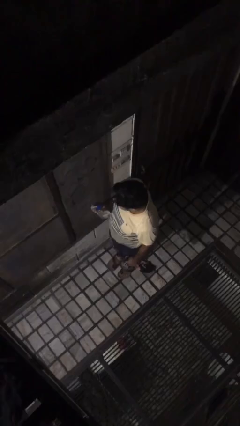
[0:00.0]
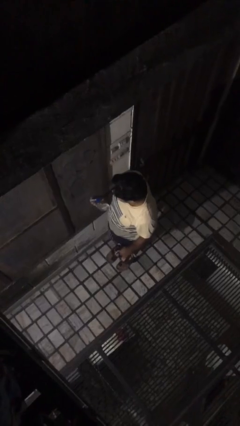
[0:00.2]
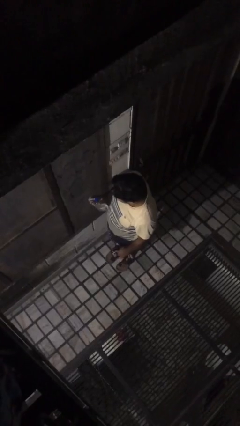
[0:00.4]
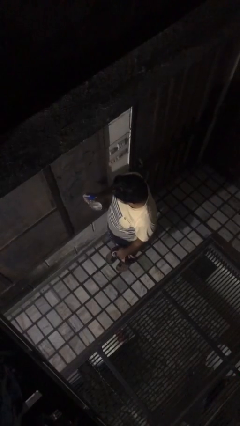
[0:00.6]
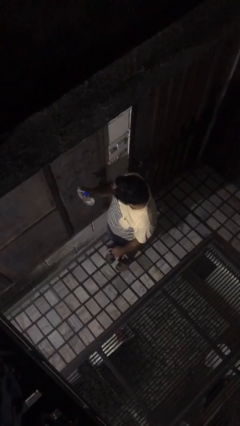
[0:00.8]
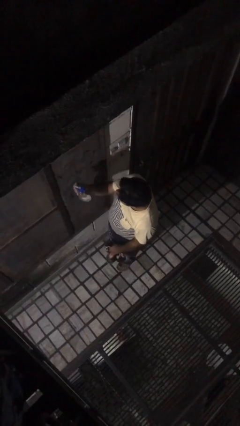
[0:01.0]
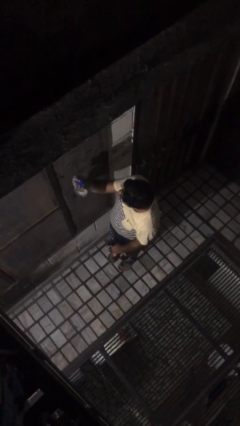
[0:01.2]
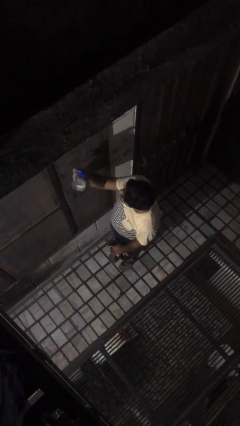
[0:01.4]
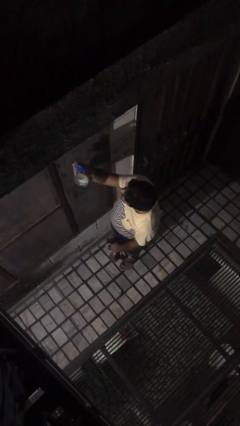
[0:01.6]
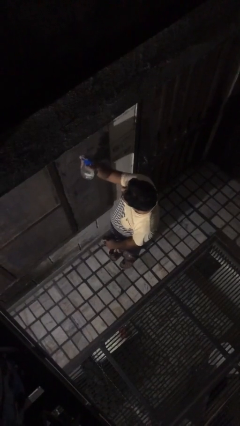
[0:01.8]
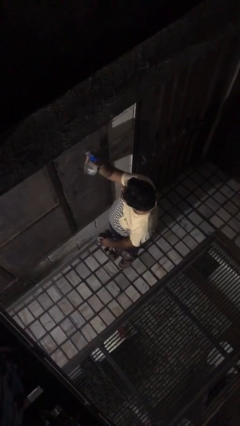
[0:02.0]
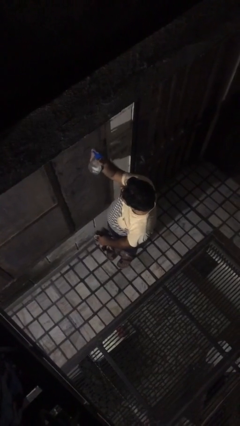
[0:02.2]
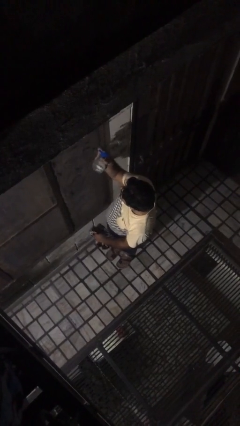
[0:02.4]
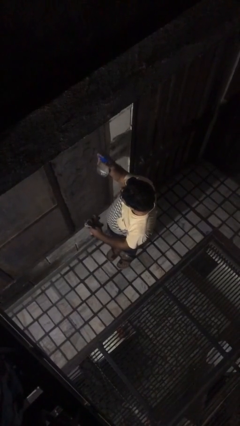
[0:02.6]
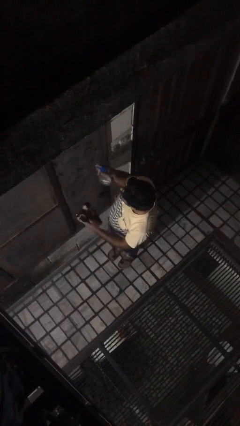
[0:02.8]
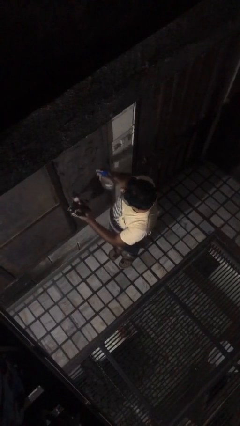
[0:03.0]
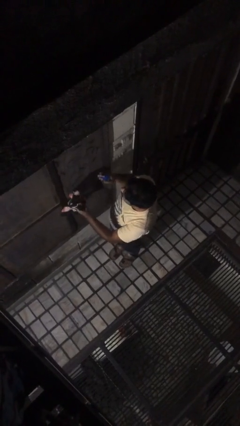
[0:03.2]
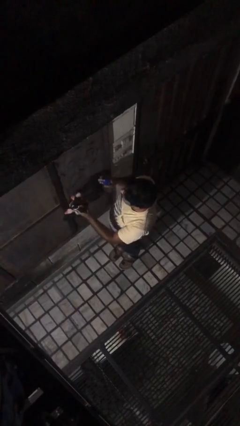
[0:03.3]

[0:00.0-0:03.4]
person sprays from bottle

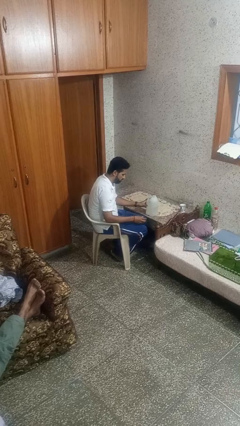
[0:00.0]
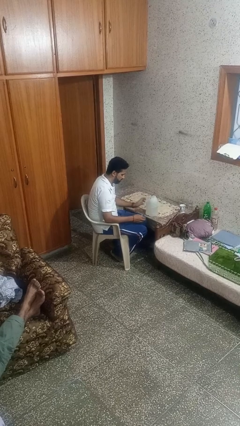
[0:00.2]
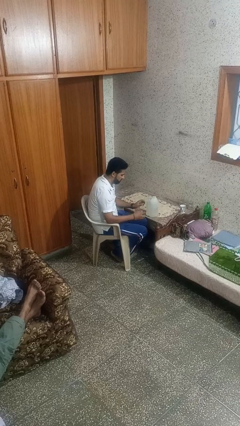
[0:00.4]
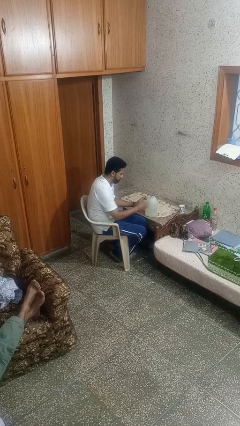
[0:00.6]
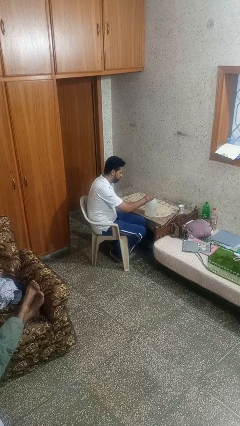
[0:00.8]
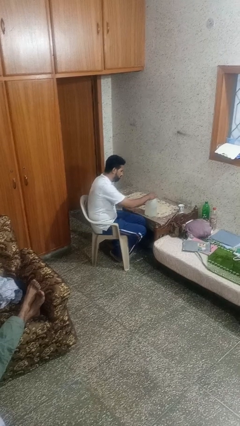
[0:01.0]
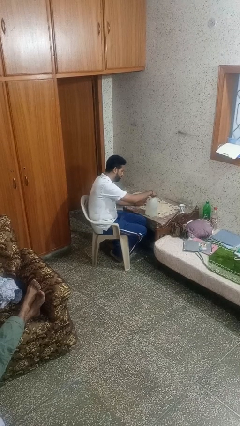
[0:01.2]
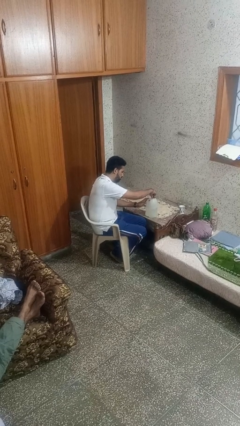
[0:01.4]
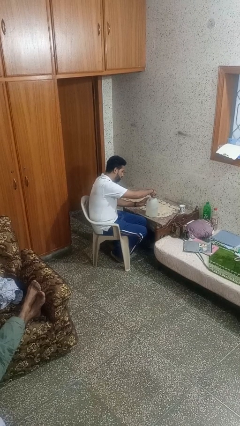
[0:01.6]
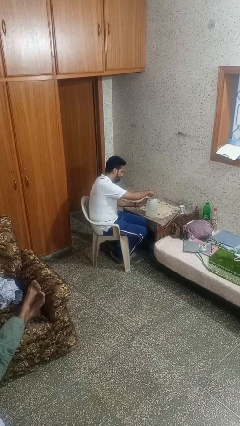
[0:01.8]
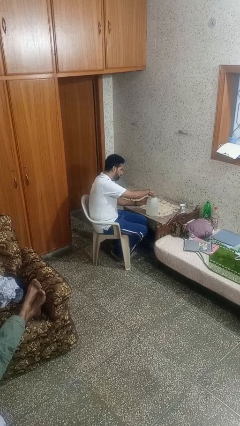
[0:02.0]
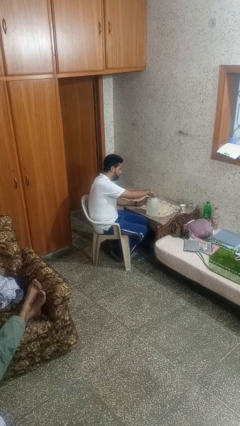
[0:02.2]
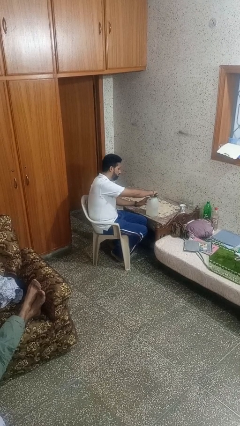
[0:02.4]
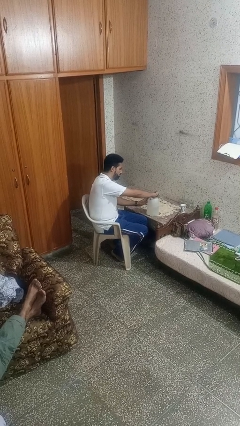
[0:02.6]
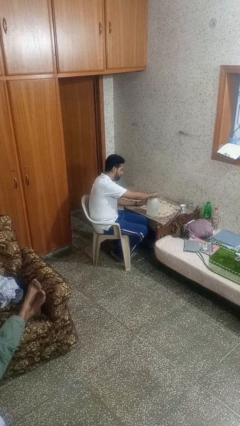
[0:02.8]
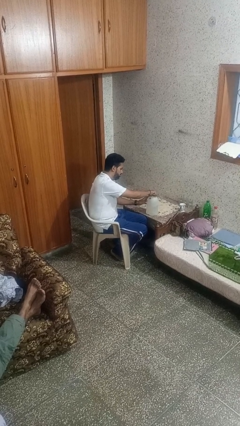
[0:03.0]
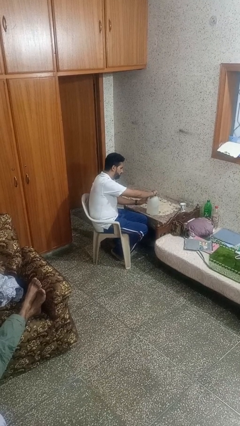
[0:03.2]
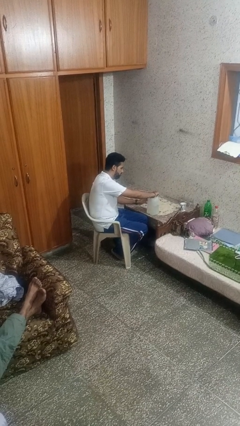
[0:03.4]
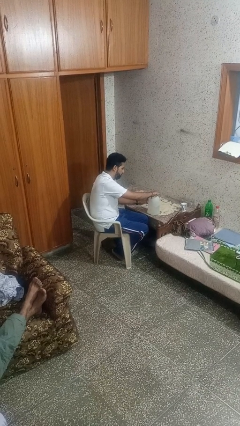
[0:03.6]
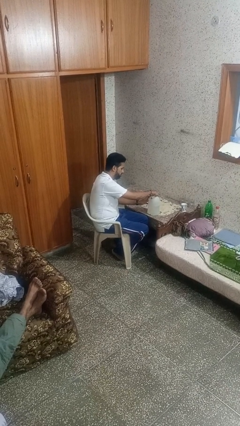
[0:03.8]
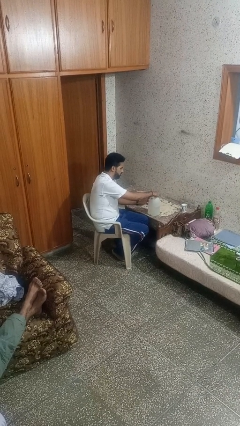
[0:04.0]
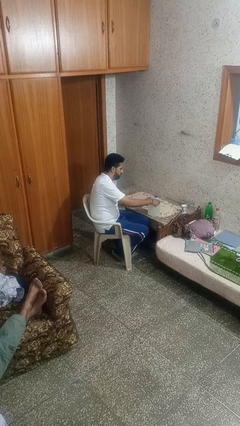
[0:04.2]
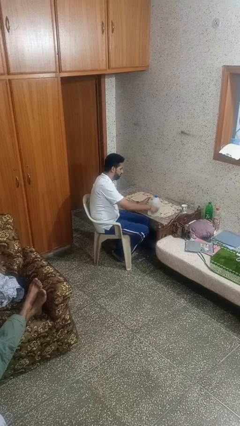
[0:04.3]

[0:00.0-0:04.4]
person screws lid to bottle

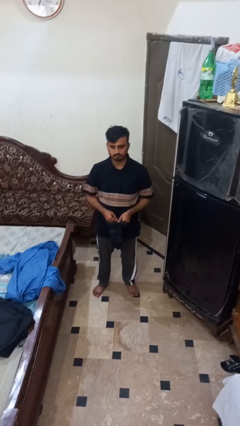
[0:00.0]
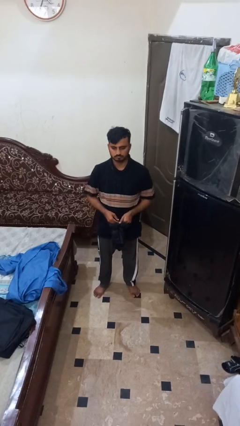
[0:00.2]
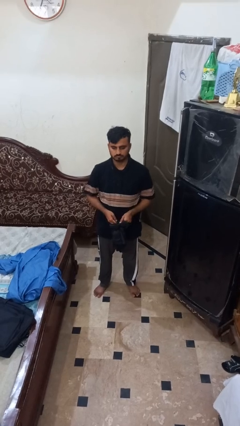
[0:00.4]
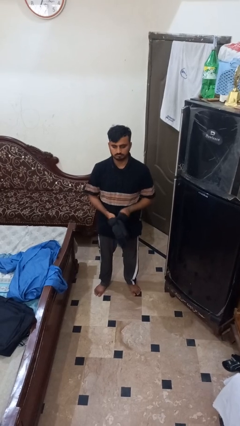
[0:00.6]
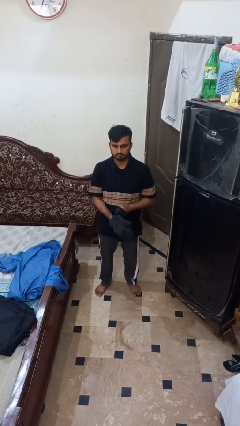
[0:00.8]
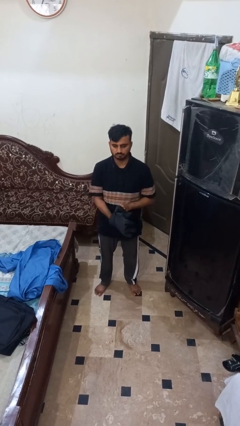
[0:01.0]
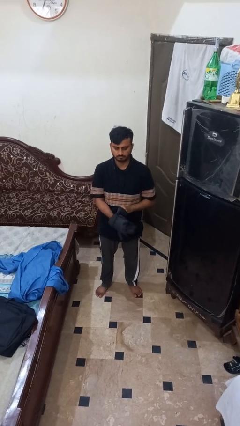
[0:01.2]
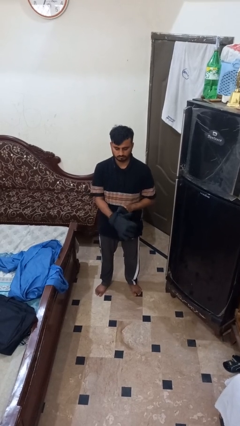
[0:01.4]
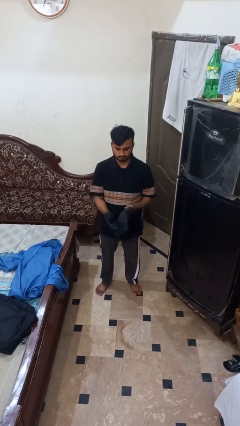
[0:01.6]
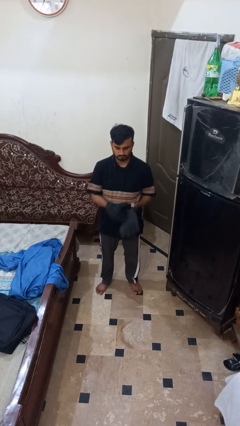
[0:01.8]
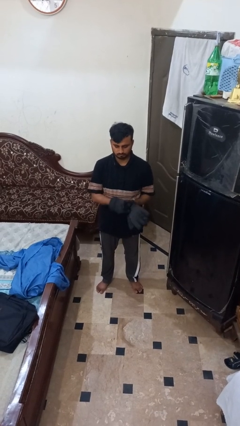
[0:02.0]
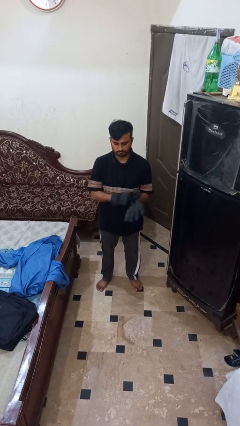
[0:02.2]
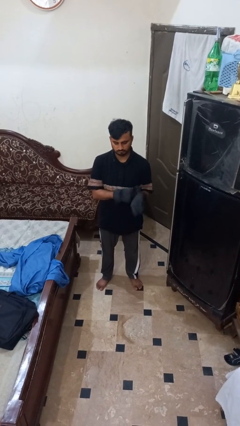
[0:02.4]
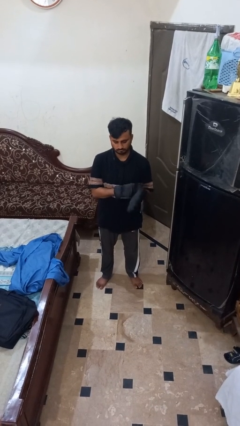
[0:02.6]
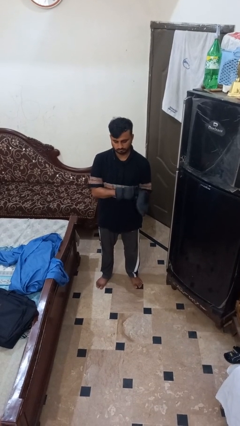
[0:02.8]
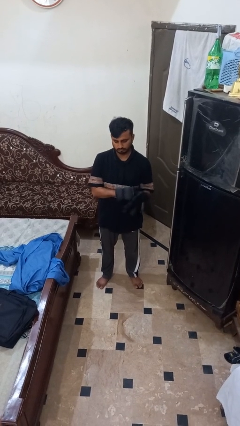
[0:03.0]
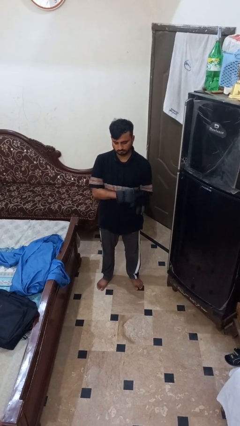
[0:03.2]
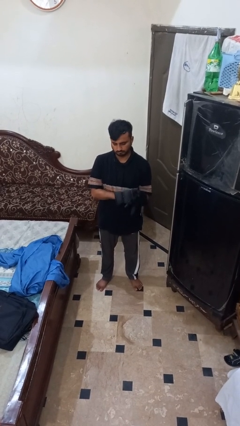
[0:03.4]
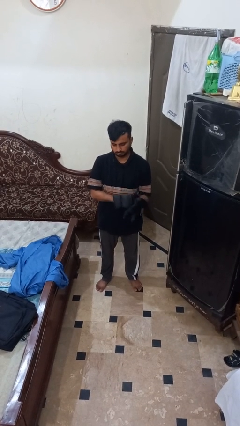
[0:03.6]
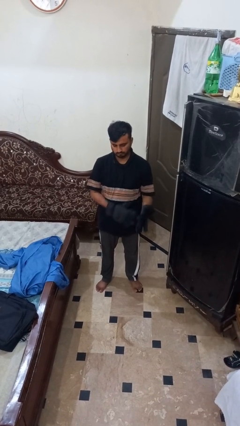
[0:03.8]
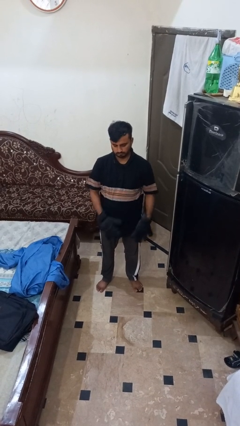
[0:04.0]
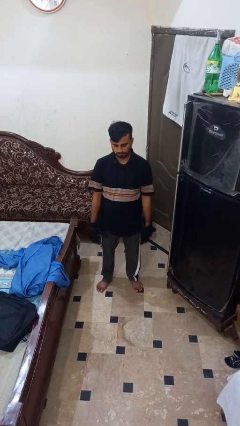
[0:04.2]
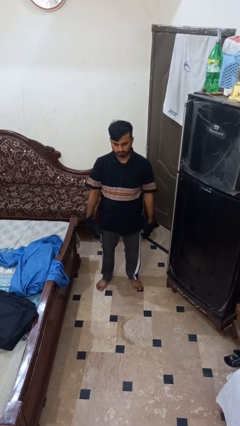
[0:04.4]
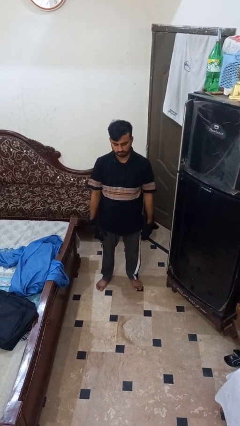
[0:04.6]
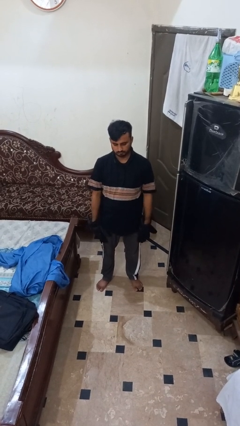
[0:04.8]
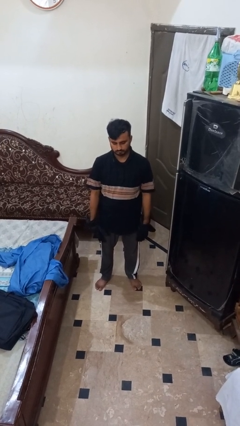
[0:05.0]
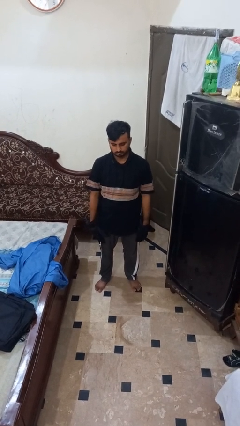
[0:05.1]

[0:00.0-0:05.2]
person puts on gloves

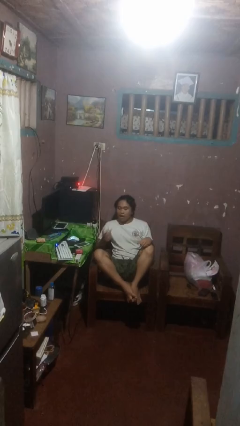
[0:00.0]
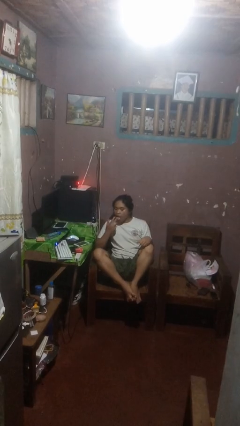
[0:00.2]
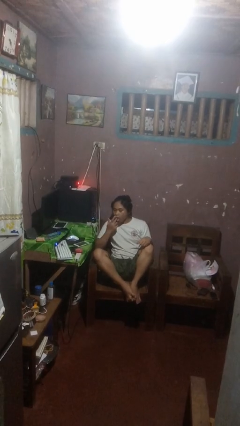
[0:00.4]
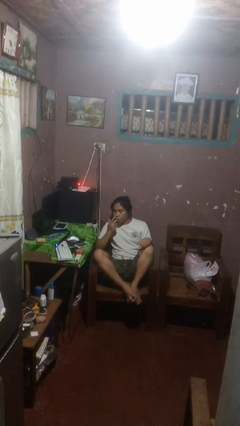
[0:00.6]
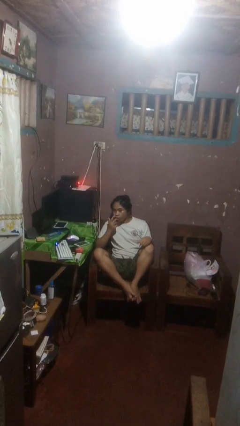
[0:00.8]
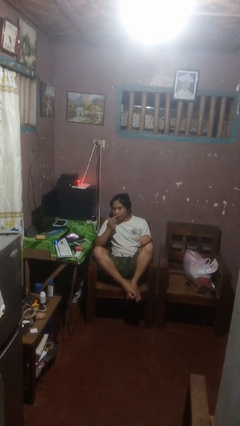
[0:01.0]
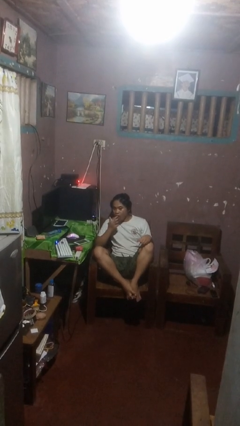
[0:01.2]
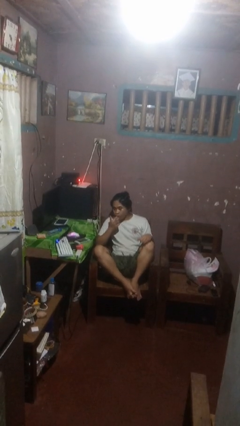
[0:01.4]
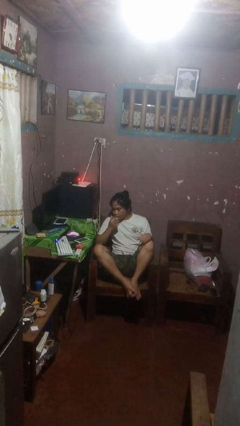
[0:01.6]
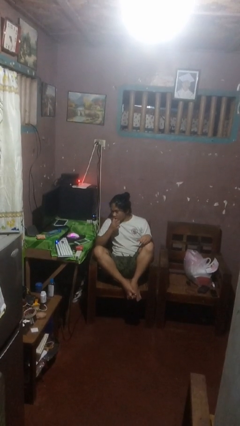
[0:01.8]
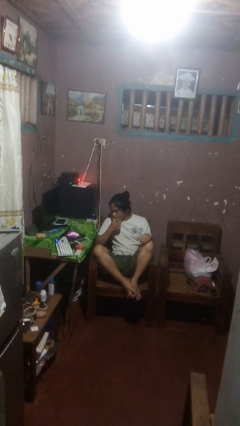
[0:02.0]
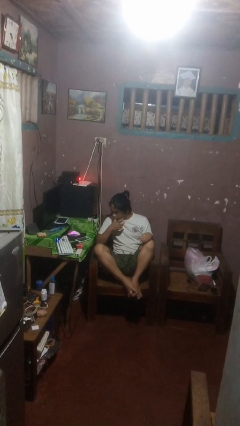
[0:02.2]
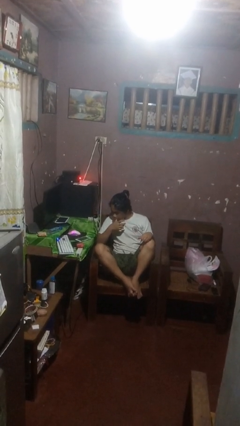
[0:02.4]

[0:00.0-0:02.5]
person licks fingers

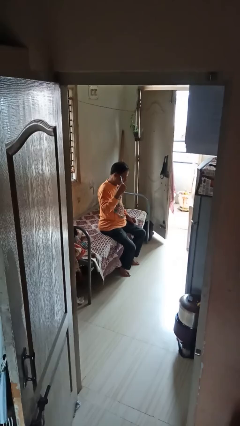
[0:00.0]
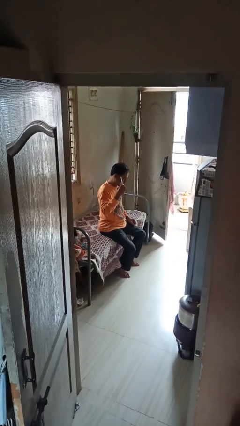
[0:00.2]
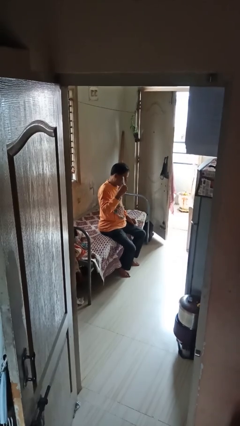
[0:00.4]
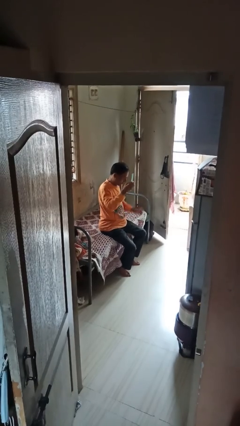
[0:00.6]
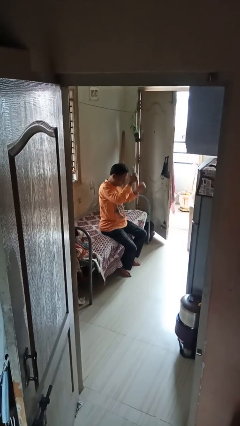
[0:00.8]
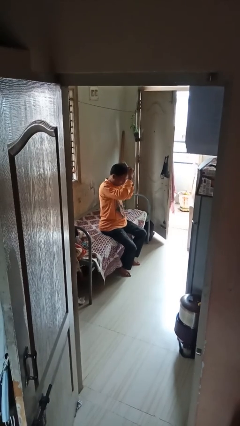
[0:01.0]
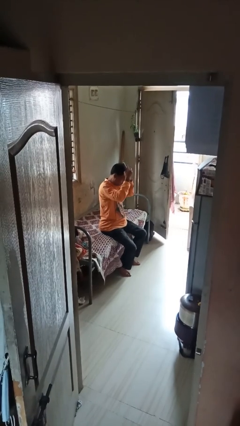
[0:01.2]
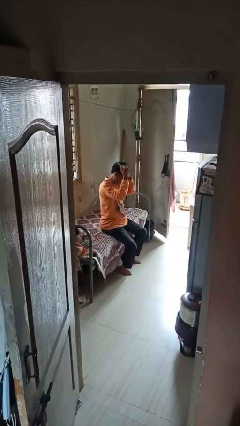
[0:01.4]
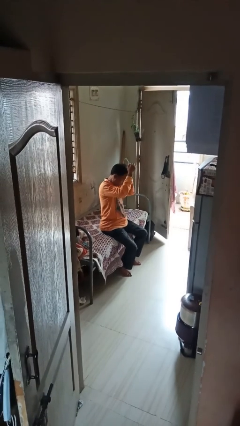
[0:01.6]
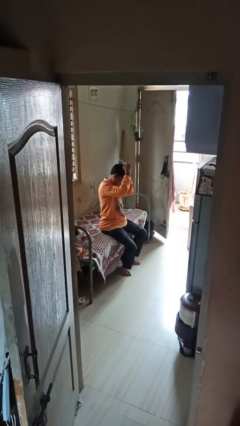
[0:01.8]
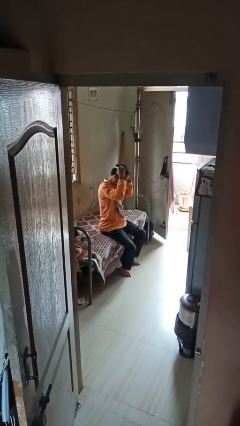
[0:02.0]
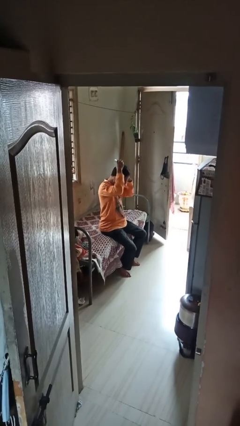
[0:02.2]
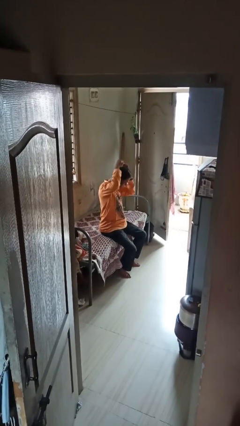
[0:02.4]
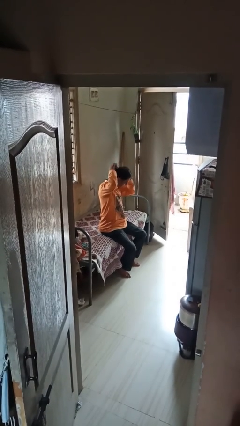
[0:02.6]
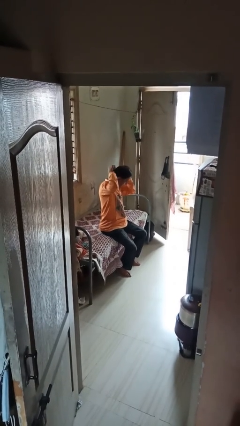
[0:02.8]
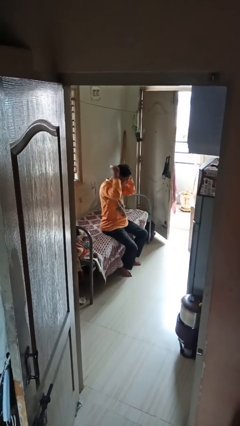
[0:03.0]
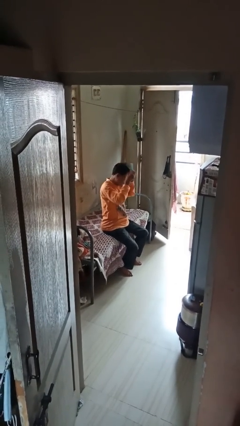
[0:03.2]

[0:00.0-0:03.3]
person brushes hair
